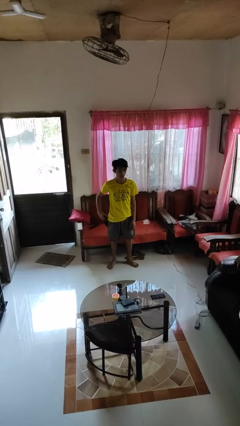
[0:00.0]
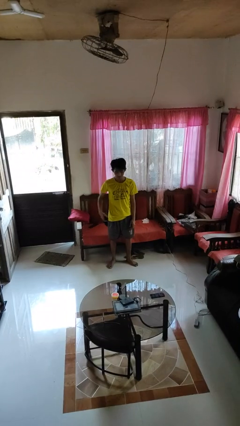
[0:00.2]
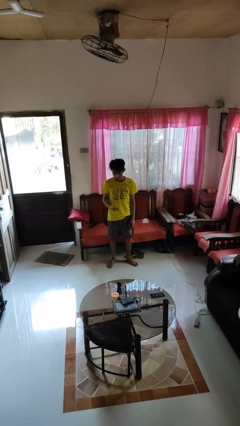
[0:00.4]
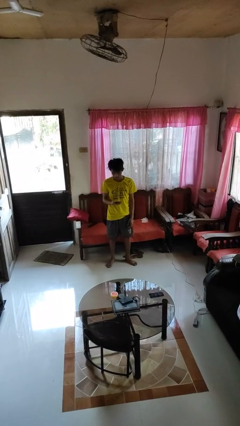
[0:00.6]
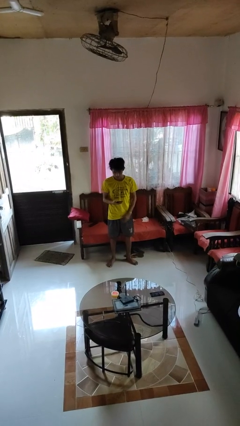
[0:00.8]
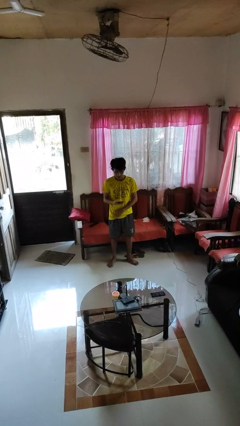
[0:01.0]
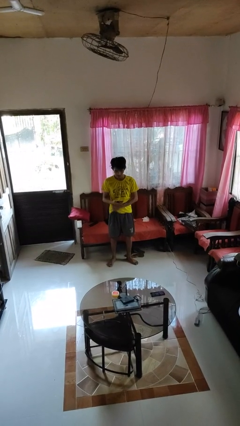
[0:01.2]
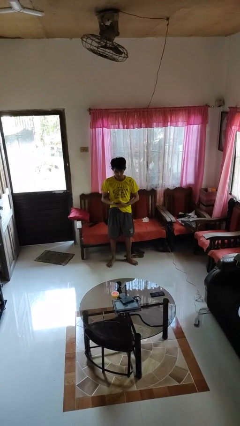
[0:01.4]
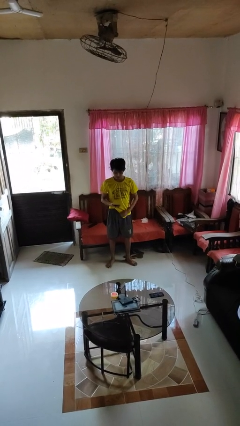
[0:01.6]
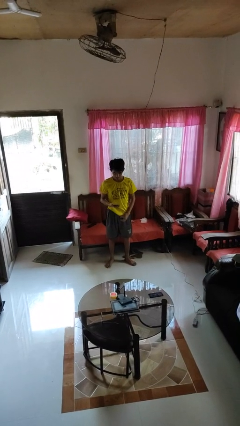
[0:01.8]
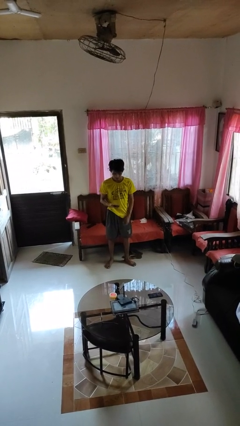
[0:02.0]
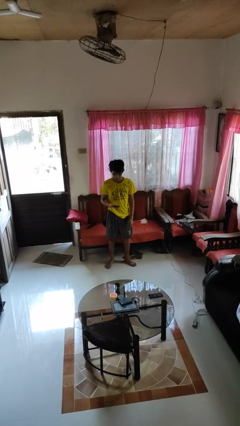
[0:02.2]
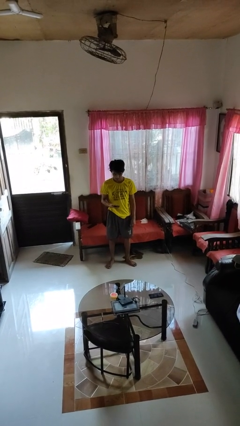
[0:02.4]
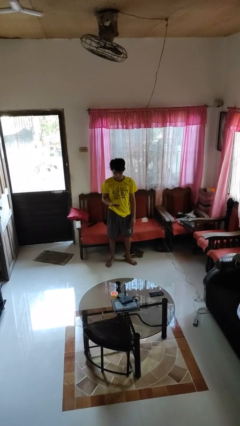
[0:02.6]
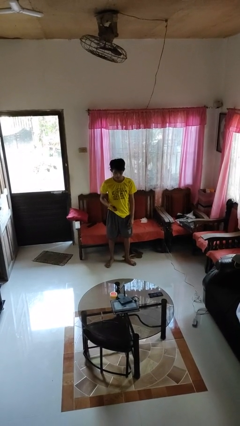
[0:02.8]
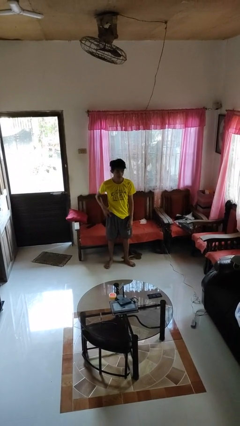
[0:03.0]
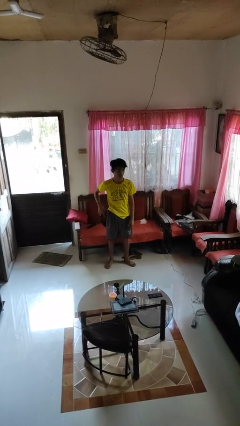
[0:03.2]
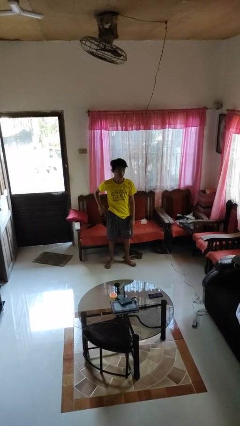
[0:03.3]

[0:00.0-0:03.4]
person takes phone from pocket

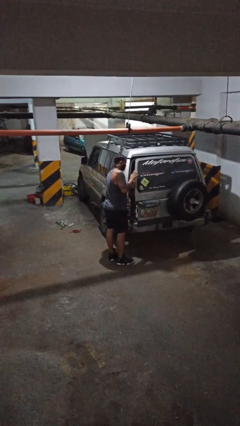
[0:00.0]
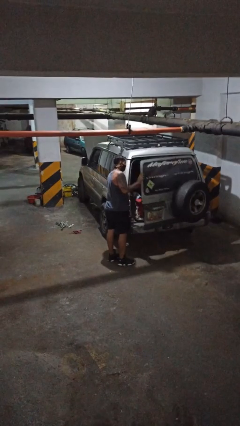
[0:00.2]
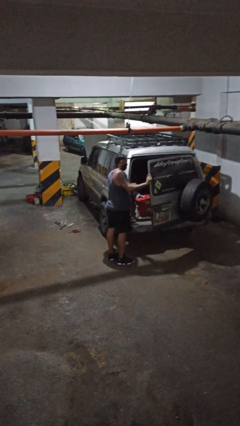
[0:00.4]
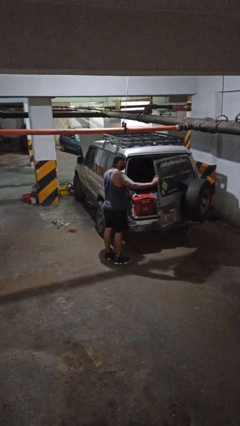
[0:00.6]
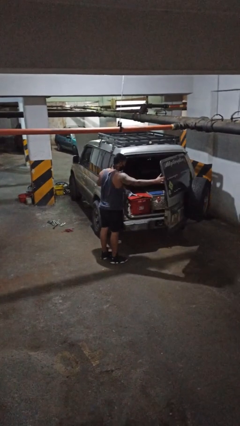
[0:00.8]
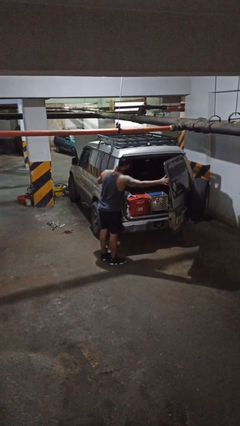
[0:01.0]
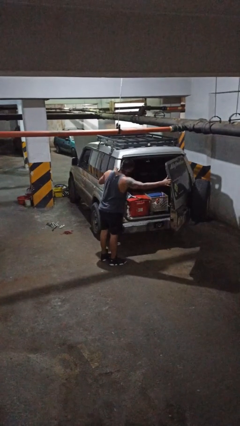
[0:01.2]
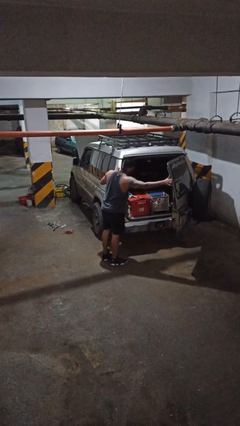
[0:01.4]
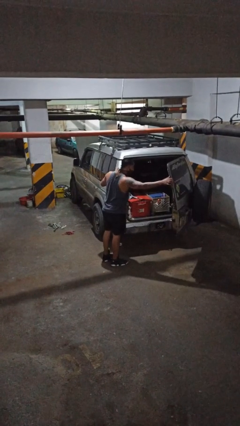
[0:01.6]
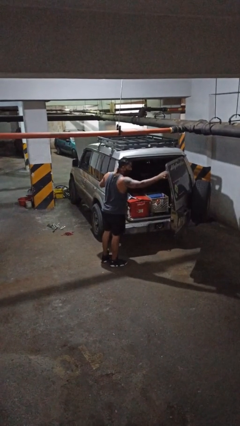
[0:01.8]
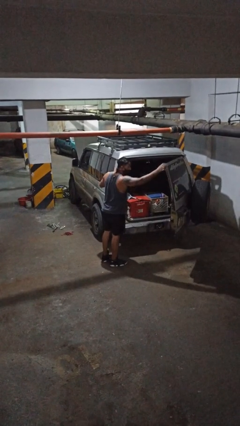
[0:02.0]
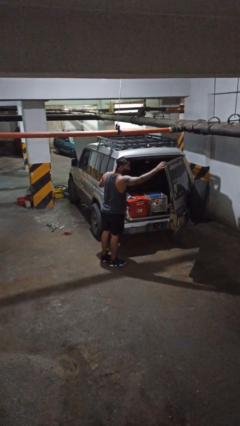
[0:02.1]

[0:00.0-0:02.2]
person opens car trunk

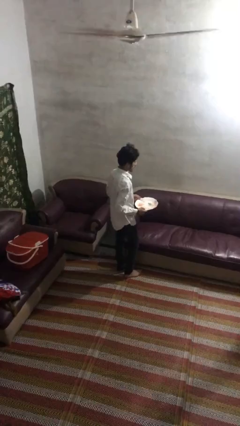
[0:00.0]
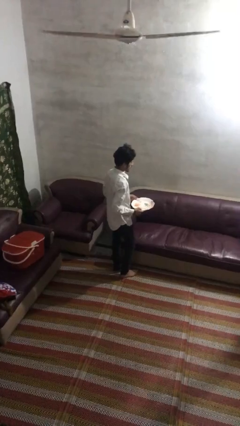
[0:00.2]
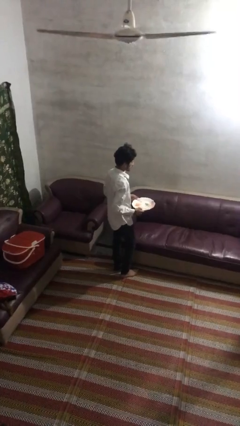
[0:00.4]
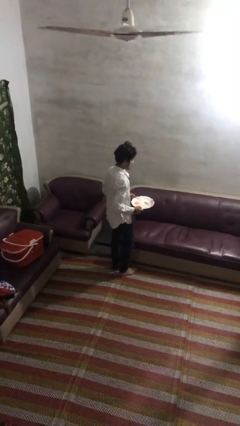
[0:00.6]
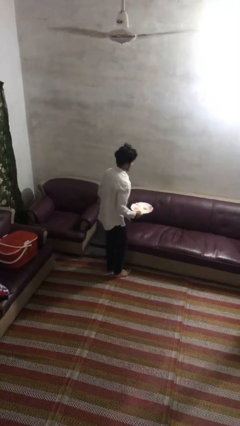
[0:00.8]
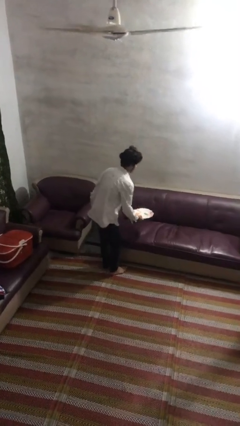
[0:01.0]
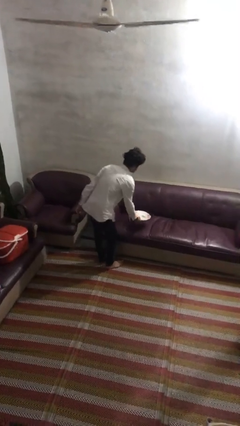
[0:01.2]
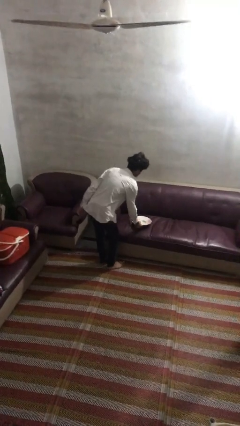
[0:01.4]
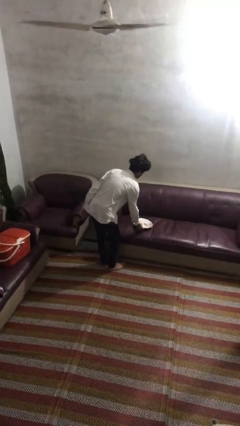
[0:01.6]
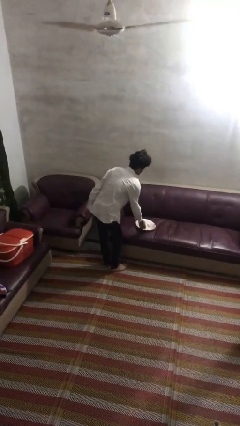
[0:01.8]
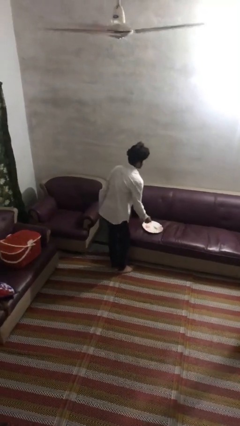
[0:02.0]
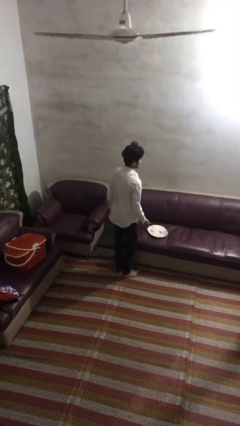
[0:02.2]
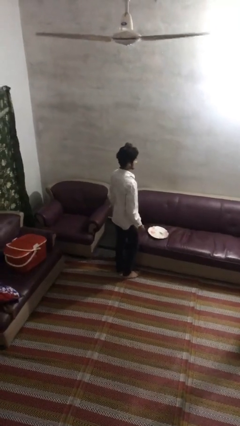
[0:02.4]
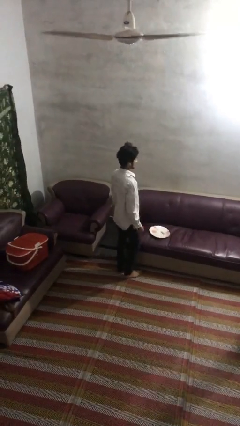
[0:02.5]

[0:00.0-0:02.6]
person puts down object on couch

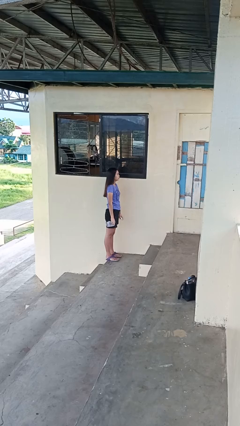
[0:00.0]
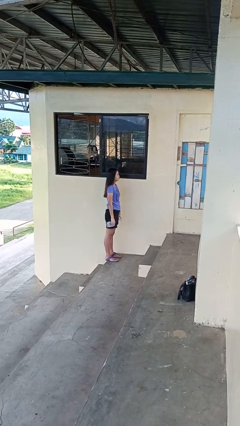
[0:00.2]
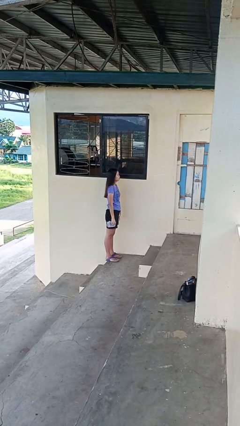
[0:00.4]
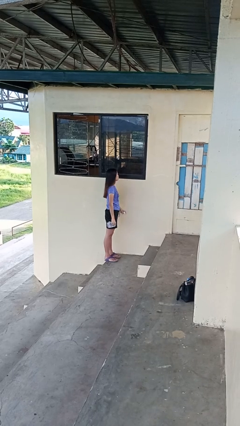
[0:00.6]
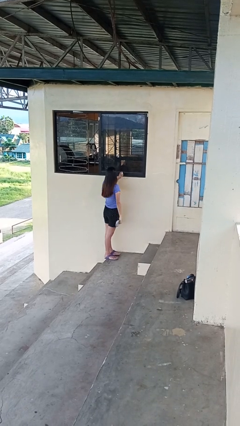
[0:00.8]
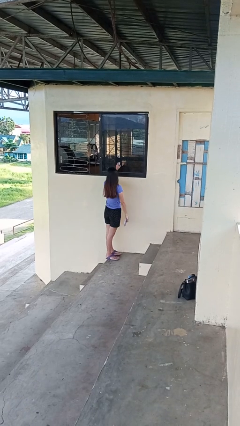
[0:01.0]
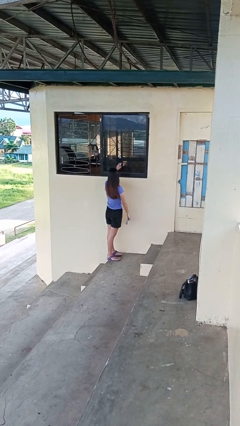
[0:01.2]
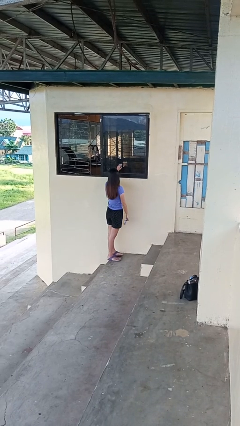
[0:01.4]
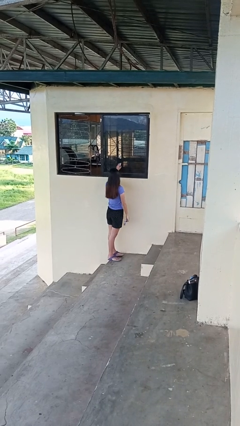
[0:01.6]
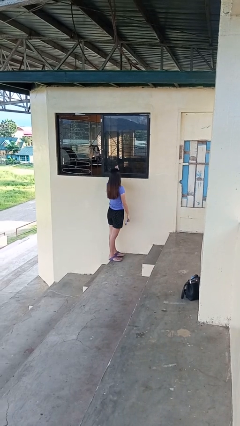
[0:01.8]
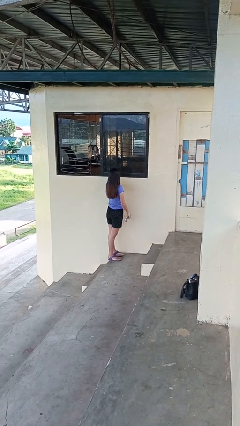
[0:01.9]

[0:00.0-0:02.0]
person sprays from bottle

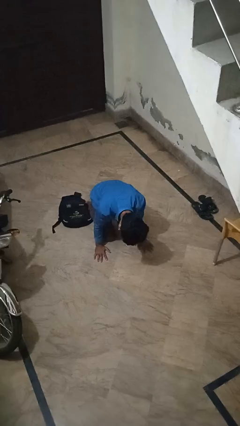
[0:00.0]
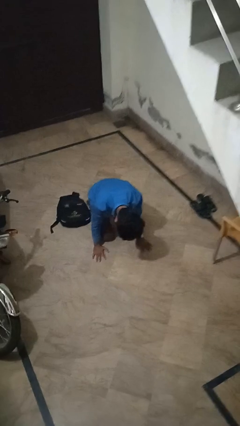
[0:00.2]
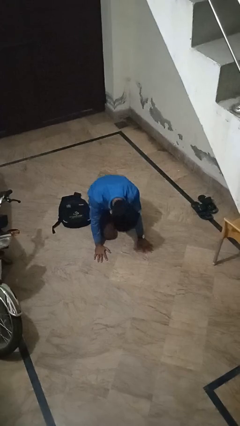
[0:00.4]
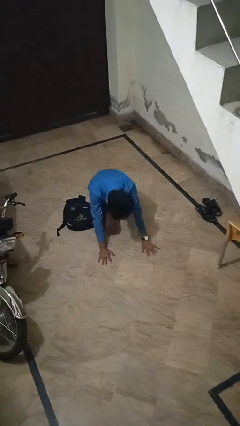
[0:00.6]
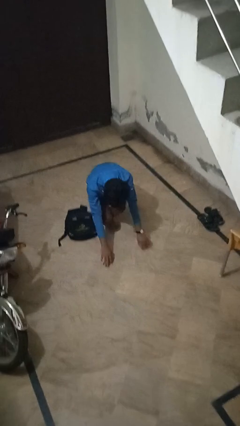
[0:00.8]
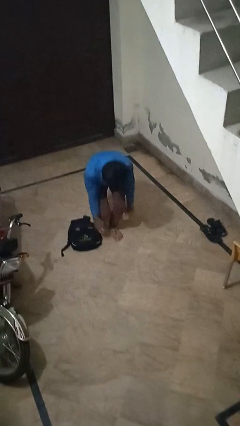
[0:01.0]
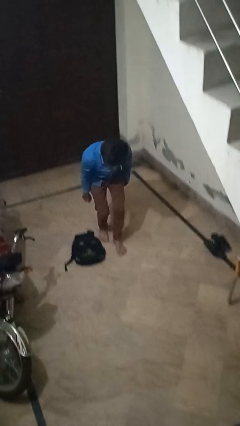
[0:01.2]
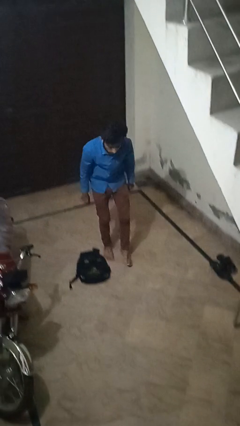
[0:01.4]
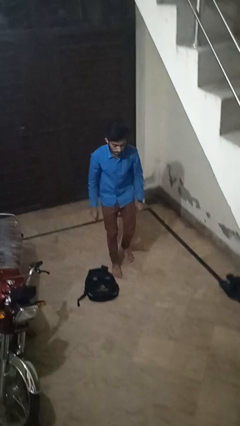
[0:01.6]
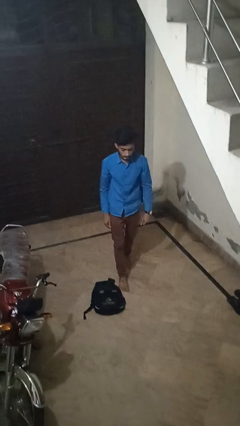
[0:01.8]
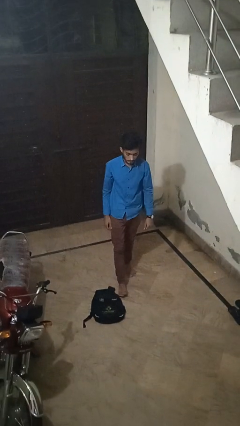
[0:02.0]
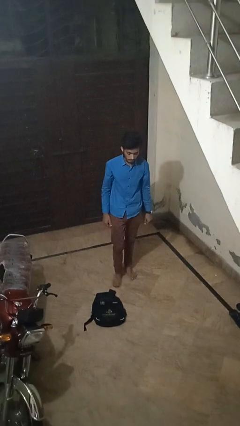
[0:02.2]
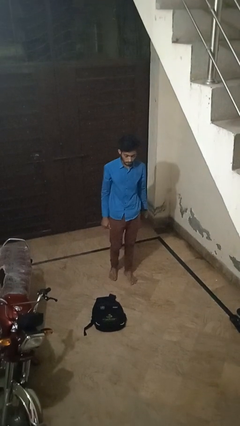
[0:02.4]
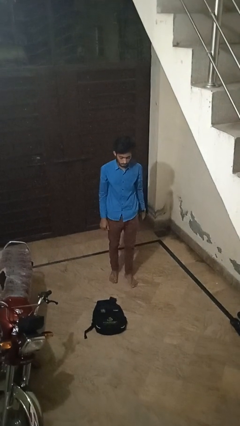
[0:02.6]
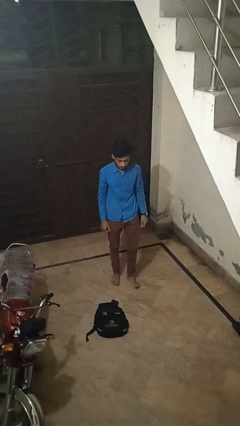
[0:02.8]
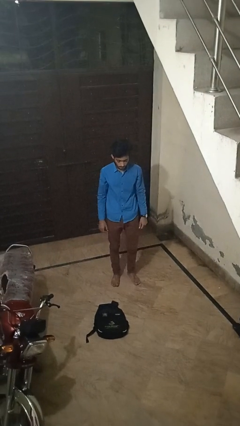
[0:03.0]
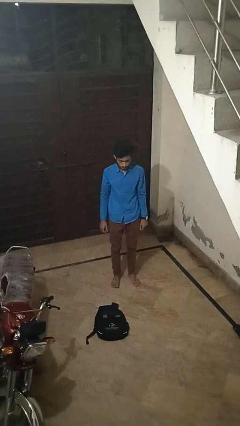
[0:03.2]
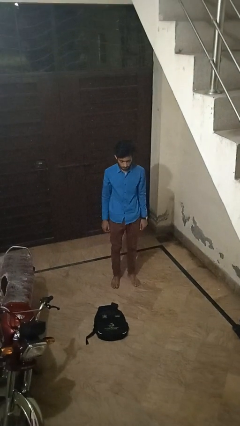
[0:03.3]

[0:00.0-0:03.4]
person stands up from floor

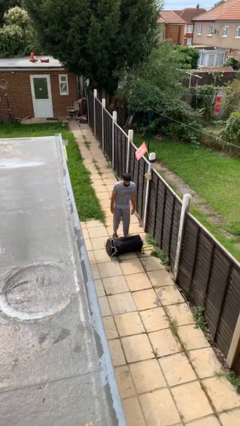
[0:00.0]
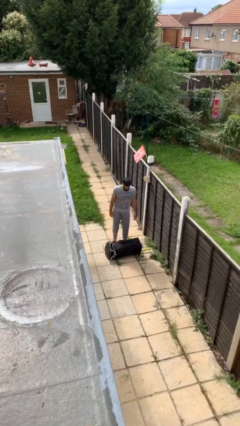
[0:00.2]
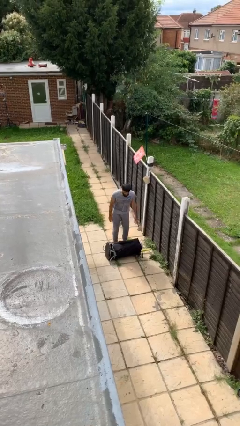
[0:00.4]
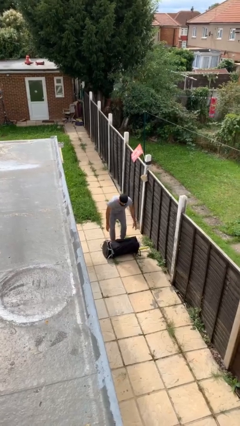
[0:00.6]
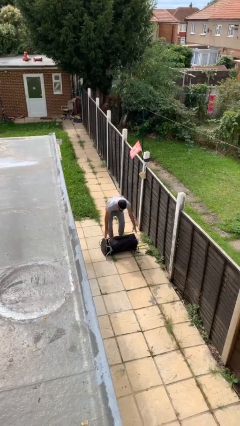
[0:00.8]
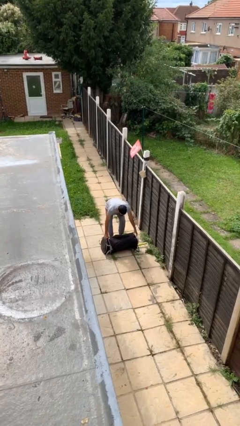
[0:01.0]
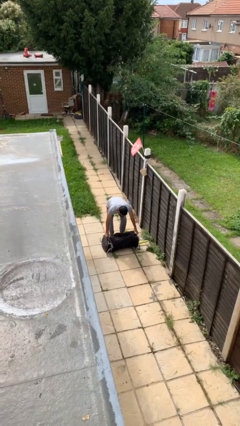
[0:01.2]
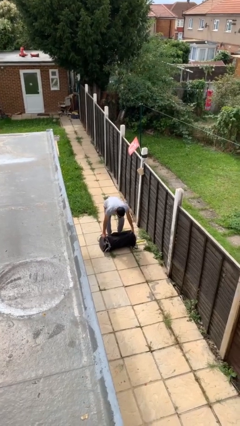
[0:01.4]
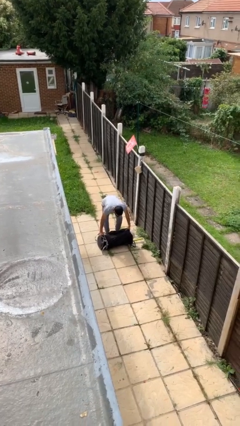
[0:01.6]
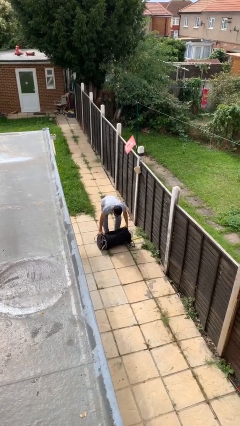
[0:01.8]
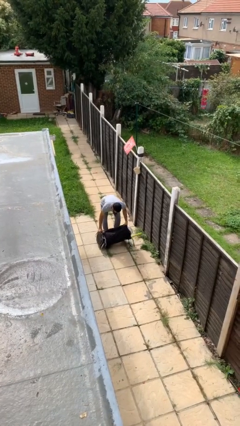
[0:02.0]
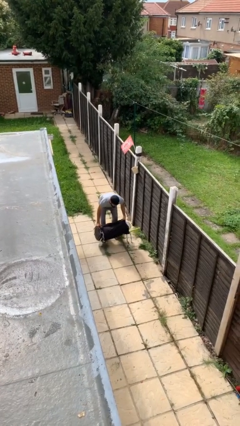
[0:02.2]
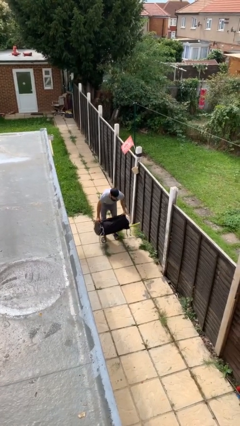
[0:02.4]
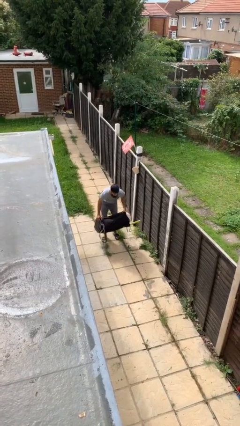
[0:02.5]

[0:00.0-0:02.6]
person picks up object from floor

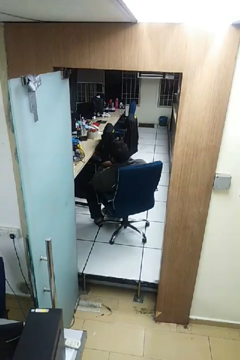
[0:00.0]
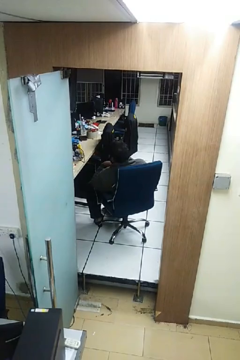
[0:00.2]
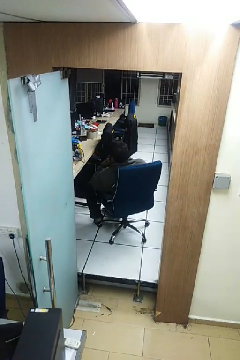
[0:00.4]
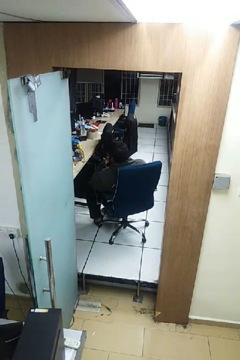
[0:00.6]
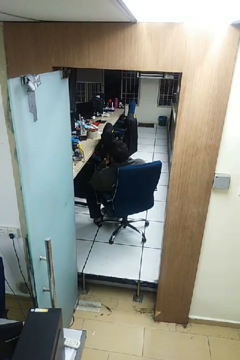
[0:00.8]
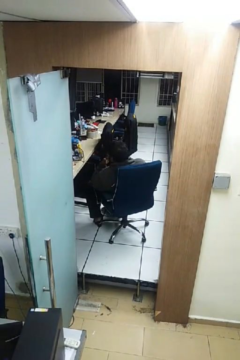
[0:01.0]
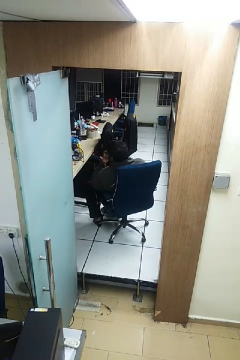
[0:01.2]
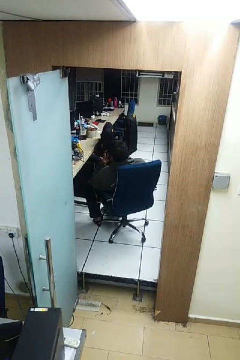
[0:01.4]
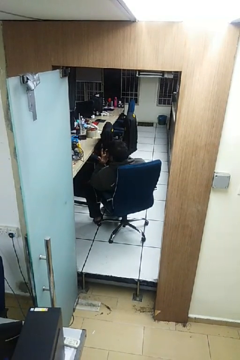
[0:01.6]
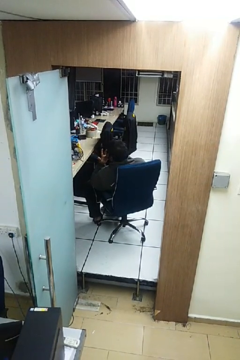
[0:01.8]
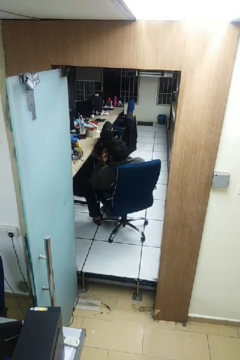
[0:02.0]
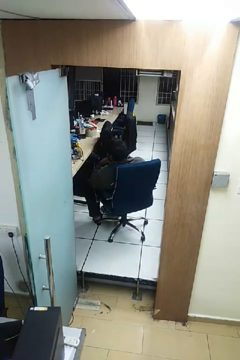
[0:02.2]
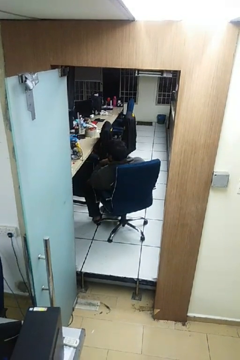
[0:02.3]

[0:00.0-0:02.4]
person licks fingers
